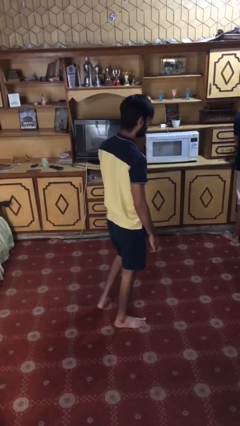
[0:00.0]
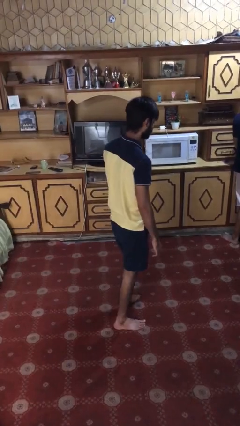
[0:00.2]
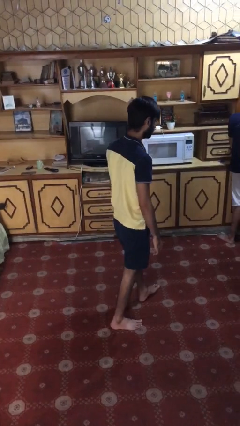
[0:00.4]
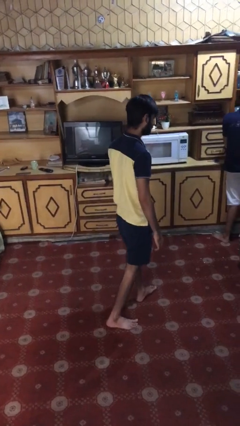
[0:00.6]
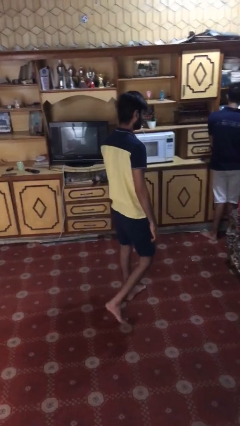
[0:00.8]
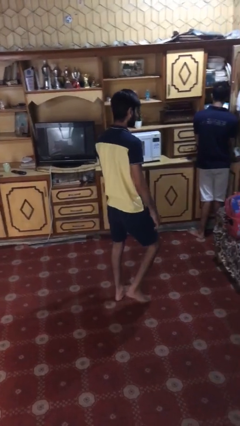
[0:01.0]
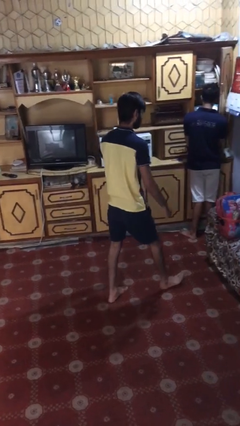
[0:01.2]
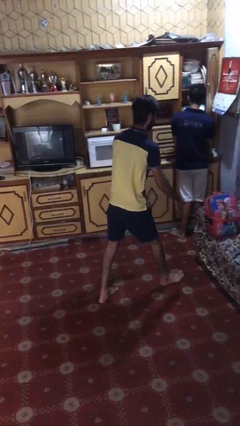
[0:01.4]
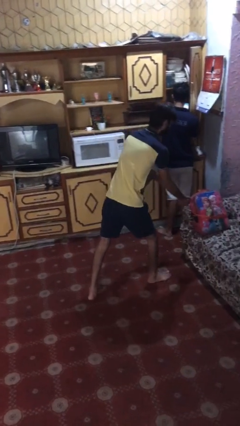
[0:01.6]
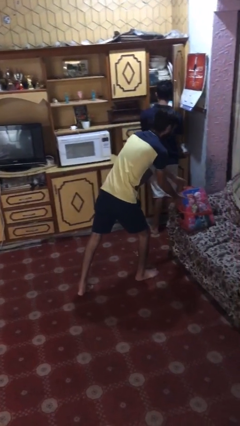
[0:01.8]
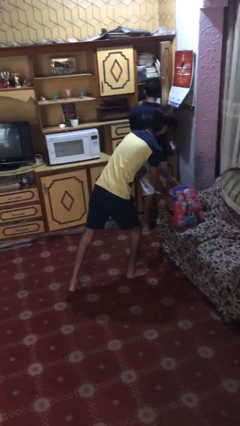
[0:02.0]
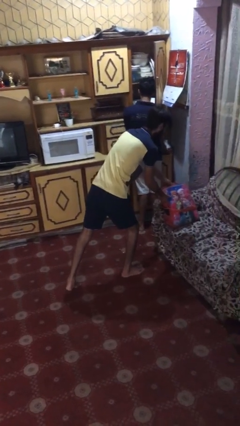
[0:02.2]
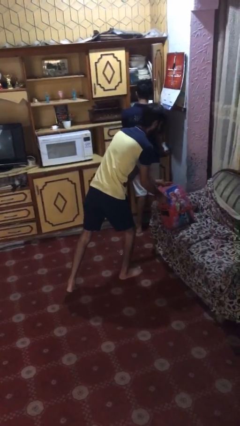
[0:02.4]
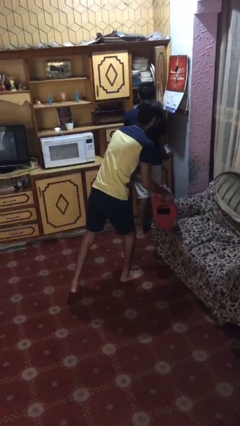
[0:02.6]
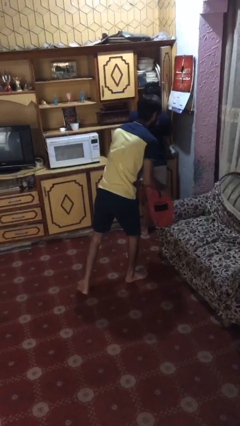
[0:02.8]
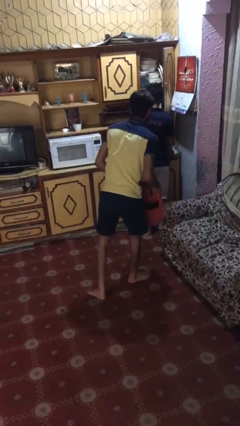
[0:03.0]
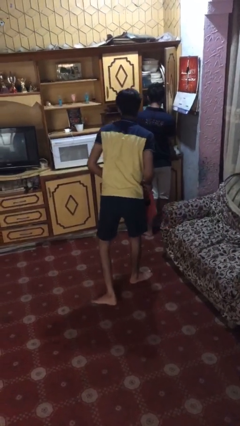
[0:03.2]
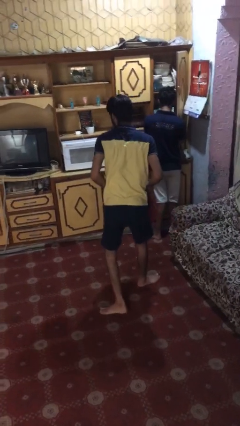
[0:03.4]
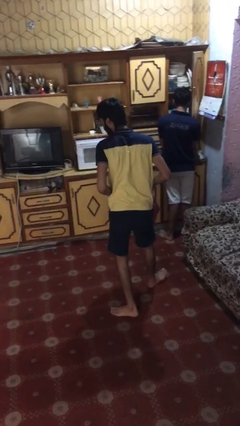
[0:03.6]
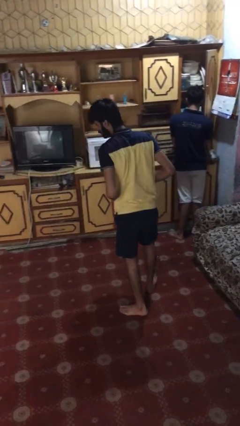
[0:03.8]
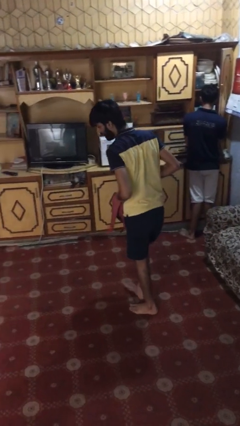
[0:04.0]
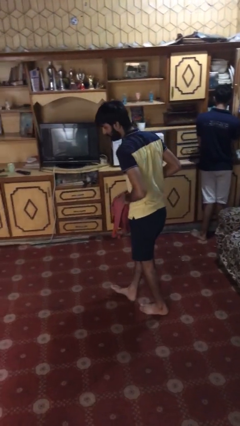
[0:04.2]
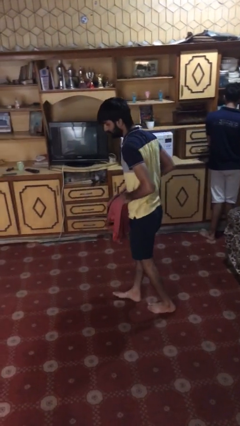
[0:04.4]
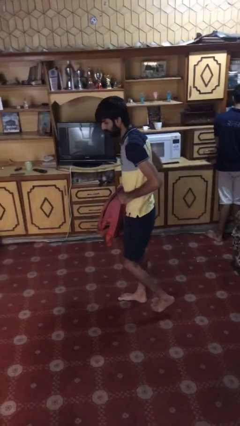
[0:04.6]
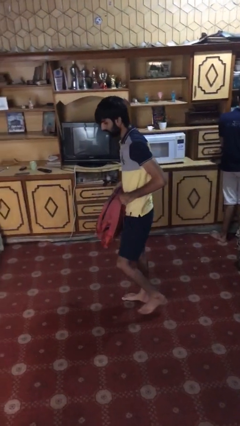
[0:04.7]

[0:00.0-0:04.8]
person steals object from person

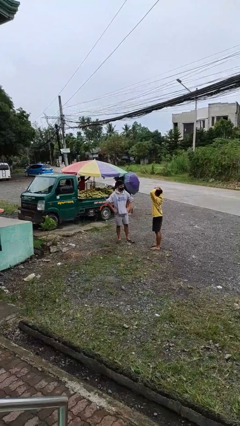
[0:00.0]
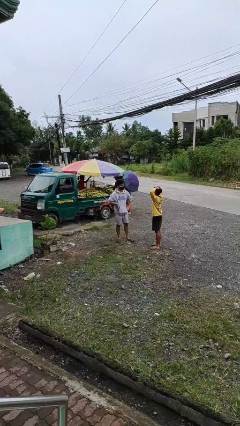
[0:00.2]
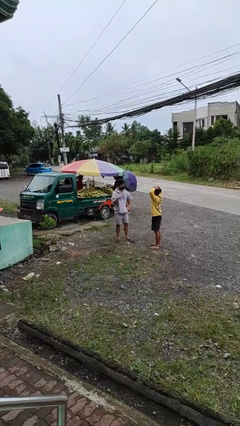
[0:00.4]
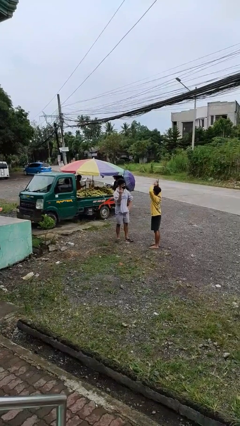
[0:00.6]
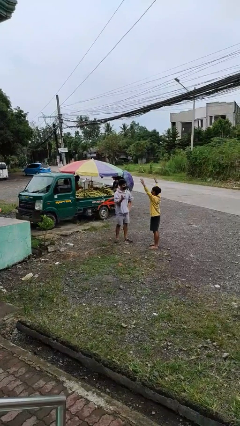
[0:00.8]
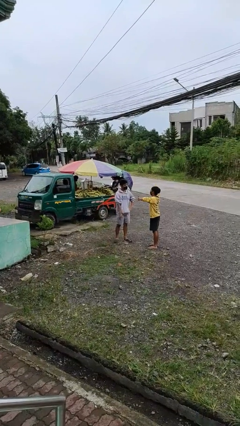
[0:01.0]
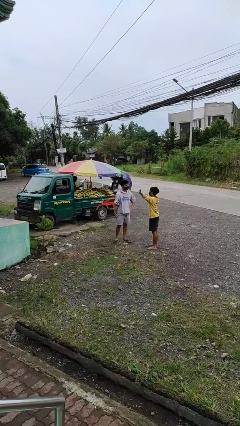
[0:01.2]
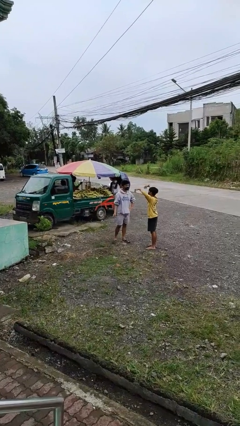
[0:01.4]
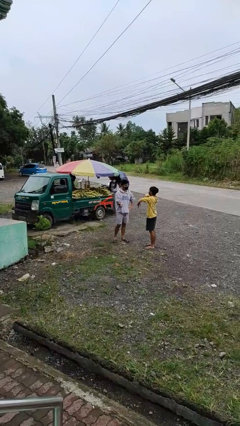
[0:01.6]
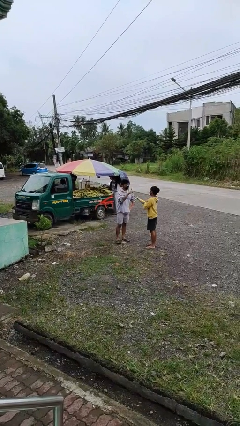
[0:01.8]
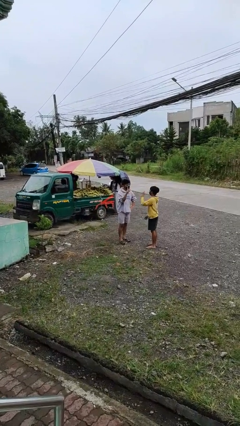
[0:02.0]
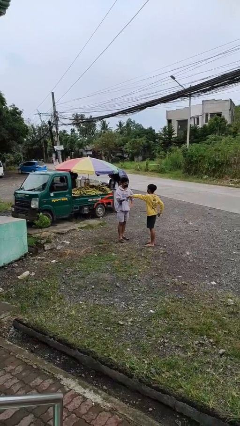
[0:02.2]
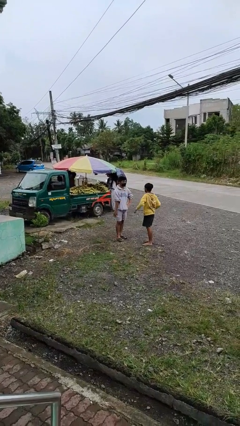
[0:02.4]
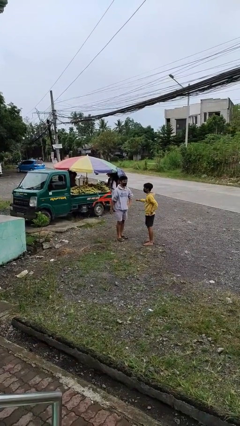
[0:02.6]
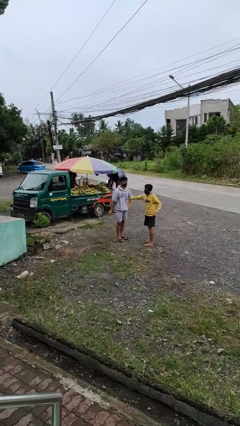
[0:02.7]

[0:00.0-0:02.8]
person talks to person

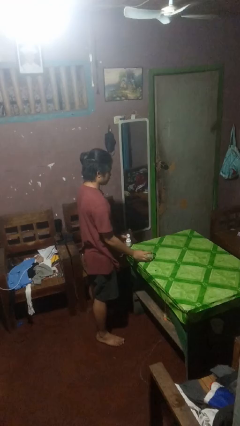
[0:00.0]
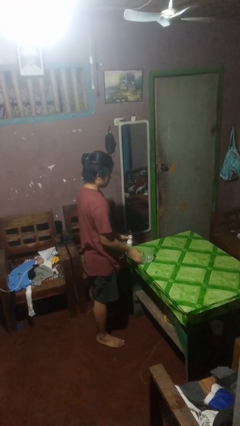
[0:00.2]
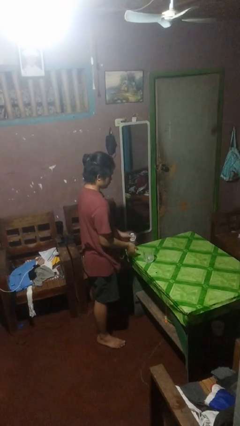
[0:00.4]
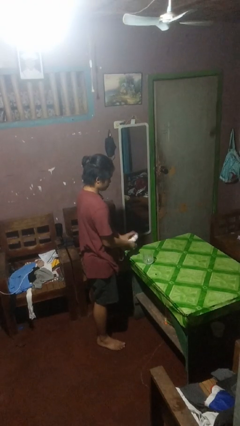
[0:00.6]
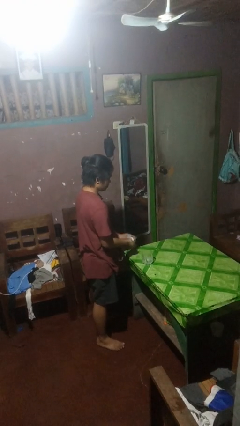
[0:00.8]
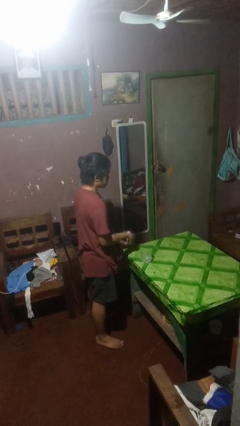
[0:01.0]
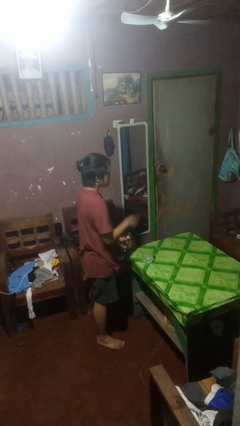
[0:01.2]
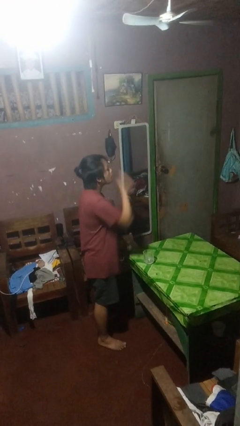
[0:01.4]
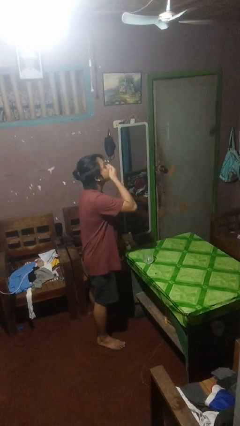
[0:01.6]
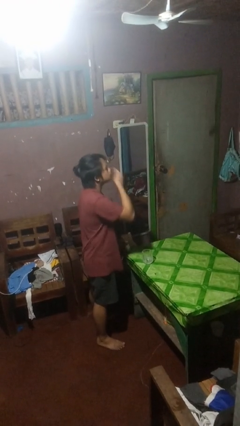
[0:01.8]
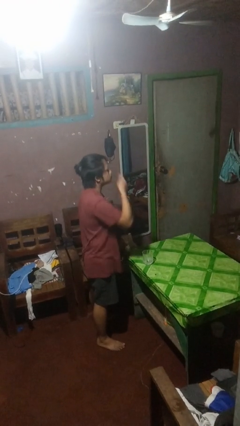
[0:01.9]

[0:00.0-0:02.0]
person takes medicine pills

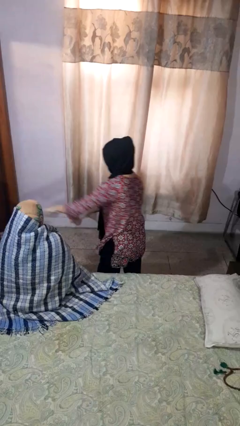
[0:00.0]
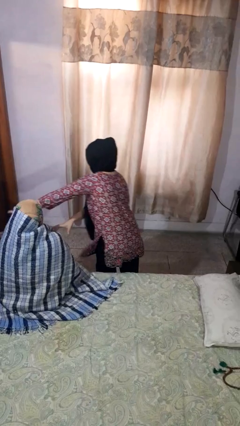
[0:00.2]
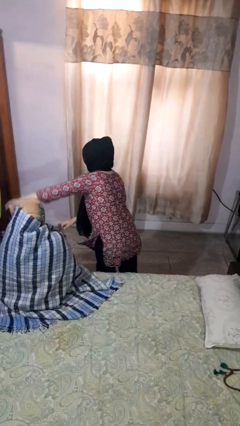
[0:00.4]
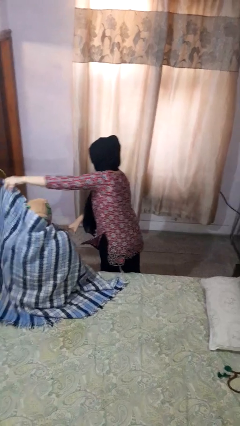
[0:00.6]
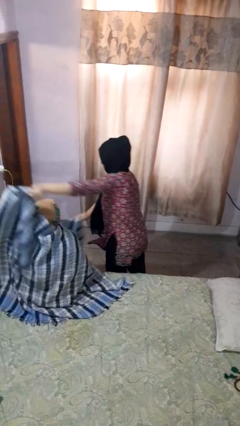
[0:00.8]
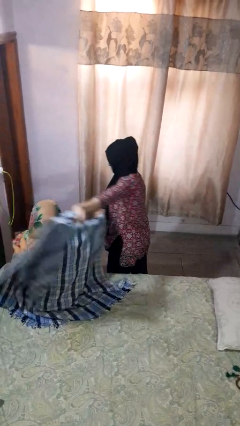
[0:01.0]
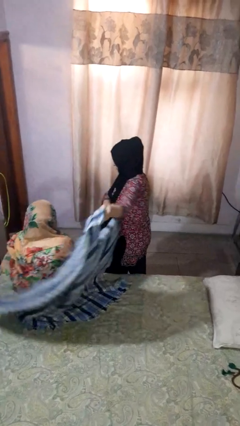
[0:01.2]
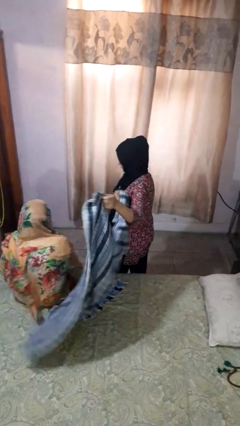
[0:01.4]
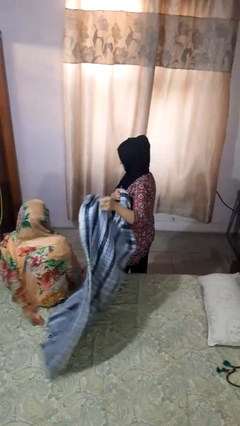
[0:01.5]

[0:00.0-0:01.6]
person uncovers friend with blanket

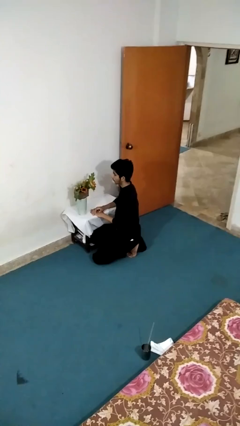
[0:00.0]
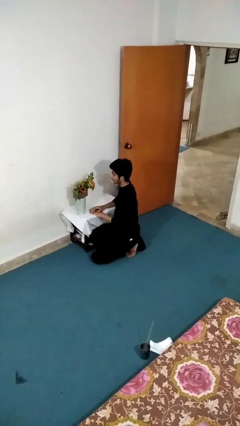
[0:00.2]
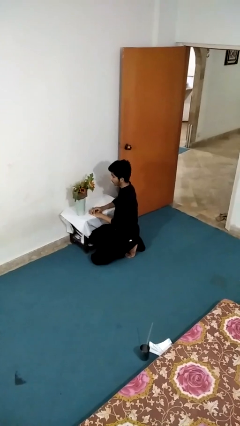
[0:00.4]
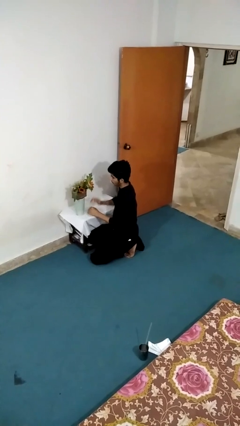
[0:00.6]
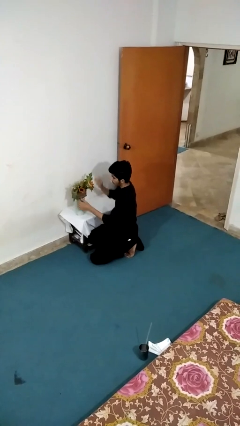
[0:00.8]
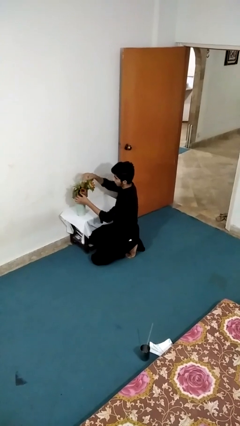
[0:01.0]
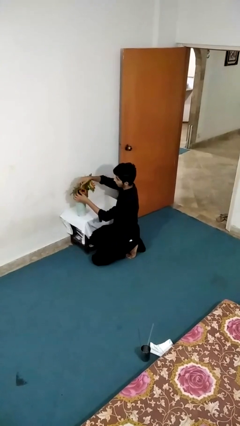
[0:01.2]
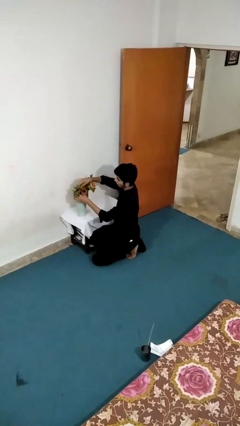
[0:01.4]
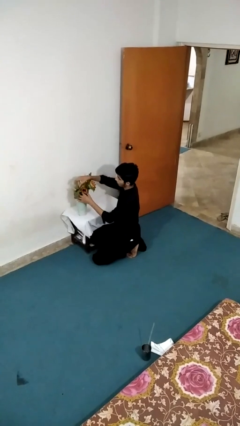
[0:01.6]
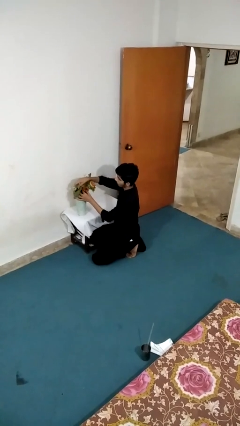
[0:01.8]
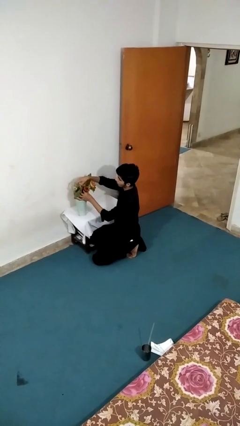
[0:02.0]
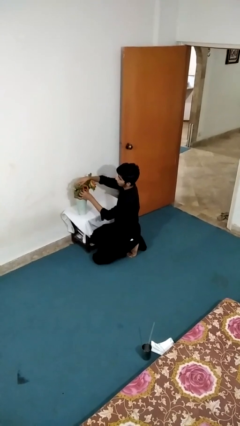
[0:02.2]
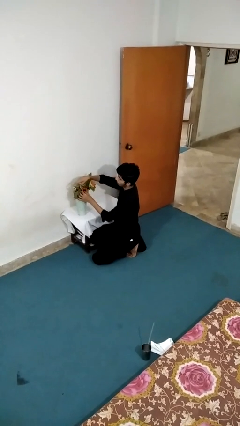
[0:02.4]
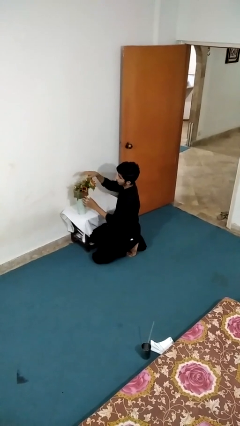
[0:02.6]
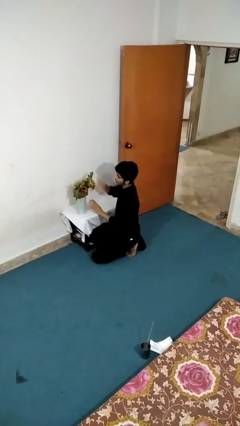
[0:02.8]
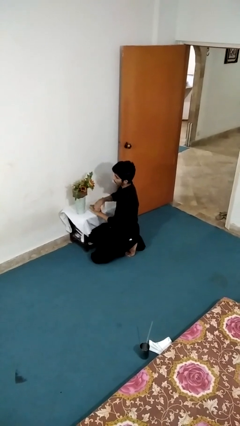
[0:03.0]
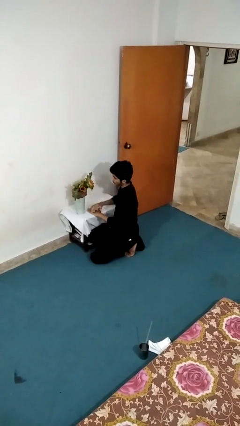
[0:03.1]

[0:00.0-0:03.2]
person arranges flowers in vase

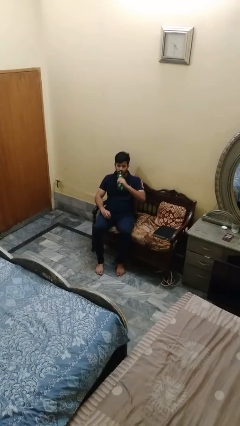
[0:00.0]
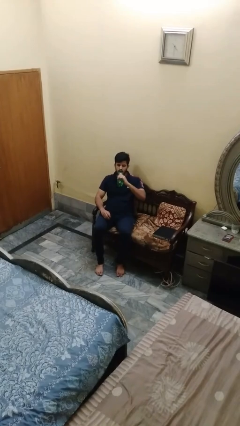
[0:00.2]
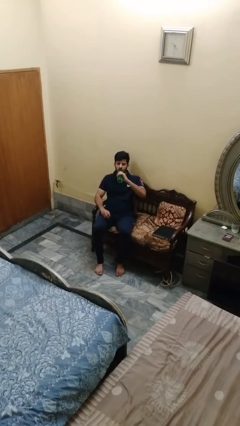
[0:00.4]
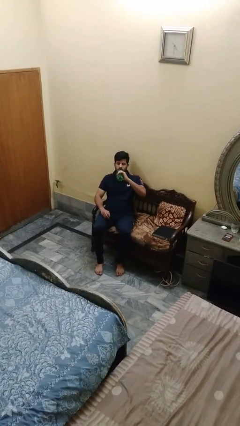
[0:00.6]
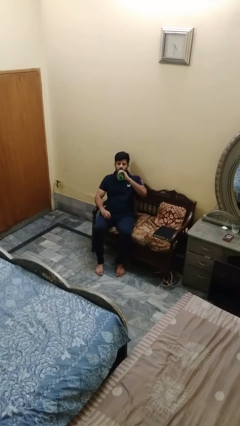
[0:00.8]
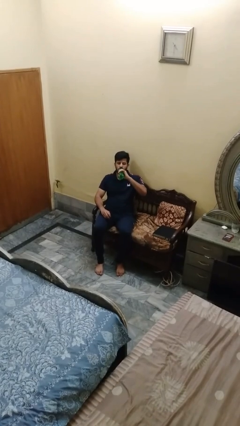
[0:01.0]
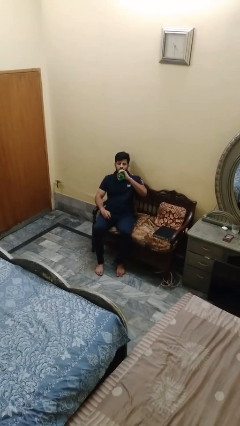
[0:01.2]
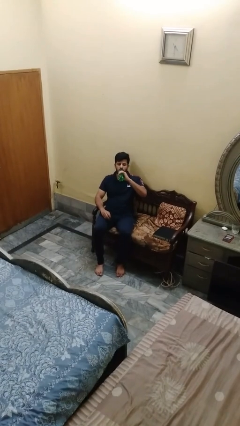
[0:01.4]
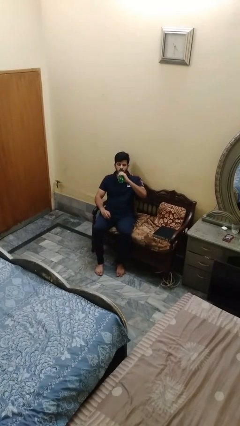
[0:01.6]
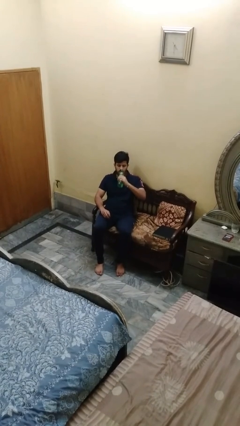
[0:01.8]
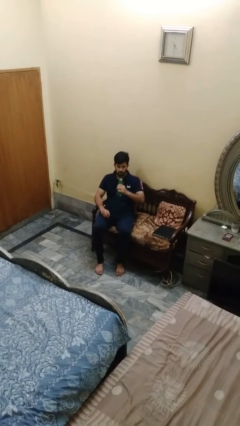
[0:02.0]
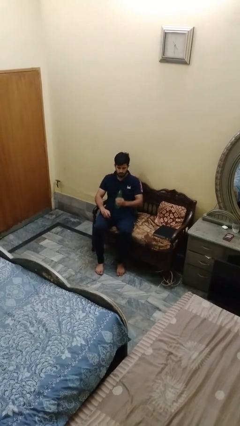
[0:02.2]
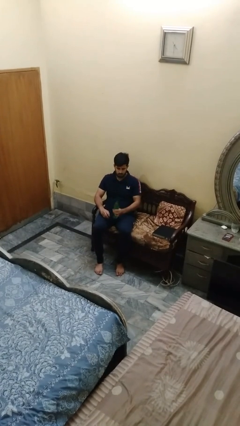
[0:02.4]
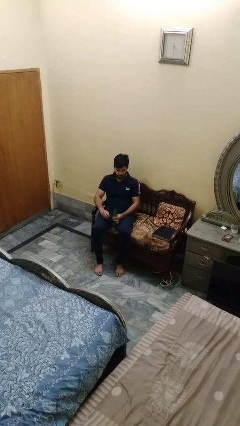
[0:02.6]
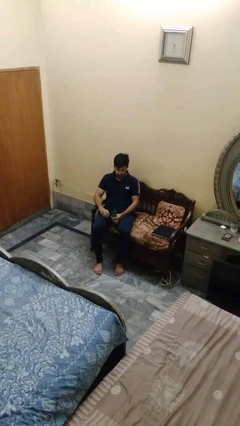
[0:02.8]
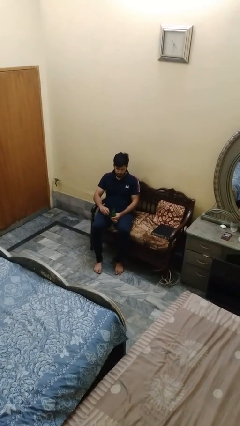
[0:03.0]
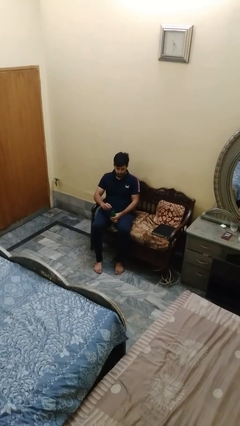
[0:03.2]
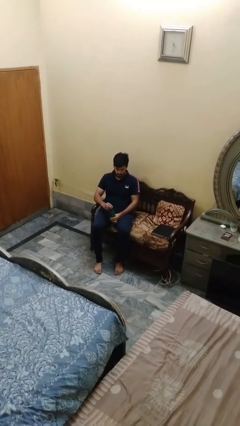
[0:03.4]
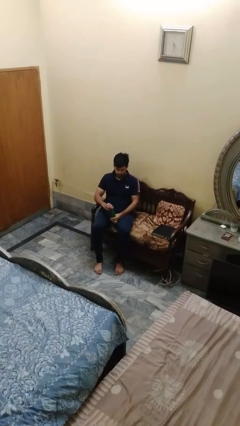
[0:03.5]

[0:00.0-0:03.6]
person drinks from bottle
